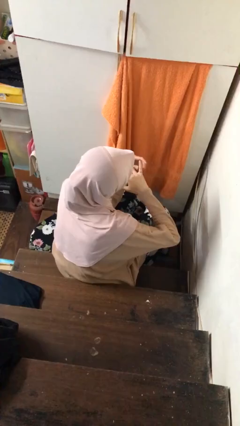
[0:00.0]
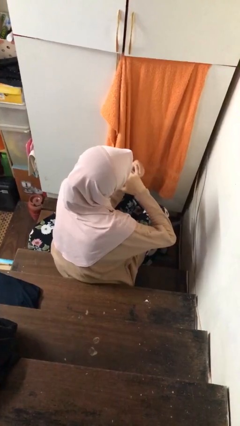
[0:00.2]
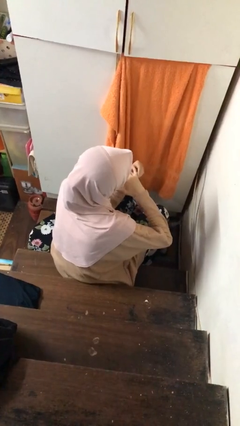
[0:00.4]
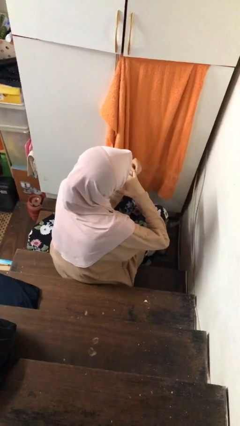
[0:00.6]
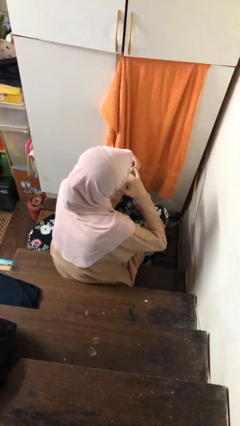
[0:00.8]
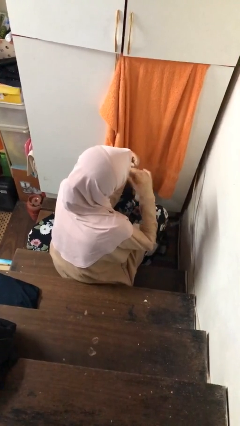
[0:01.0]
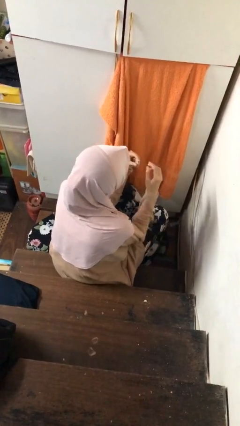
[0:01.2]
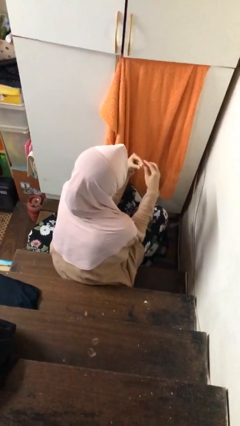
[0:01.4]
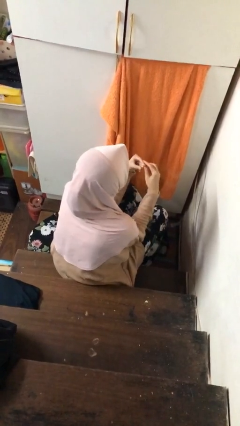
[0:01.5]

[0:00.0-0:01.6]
person takes off ring

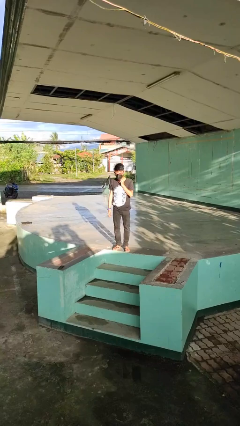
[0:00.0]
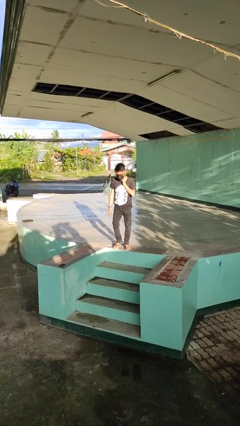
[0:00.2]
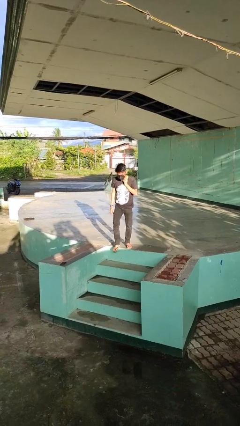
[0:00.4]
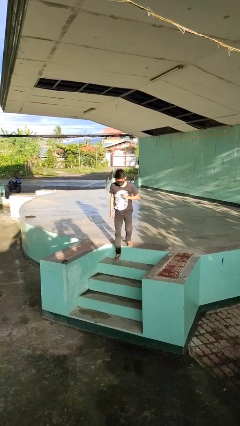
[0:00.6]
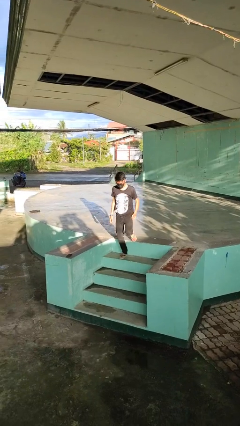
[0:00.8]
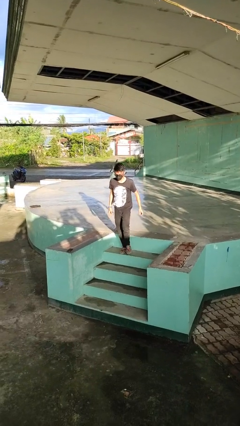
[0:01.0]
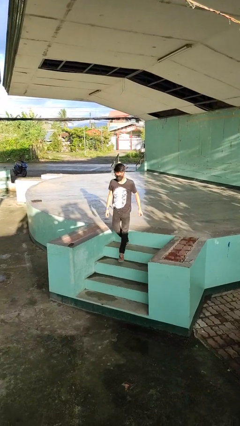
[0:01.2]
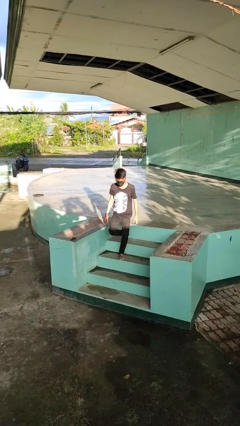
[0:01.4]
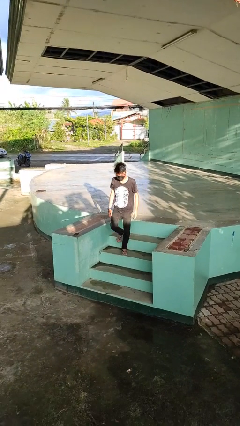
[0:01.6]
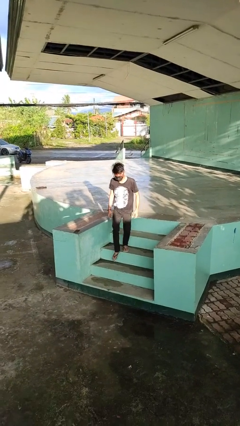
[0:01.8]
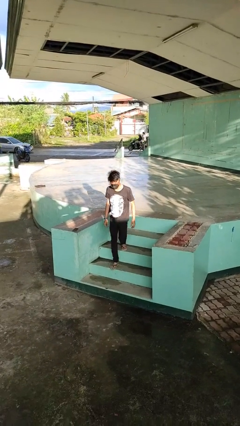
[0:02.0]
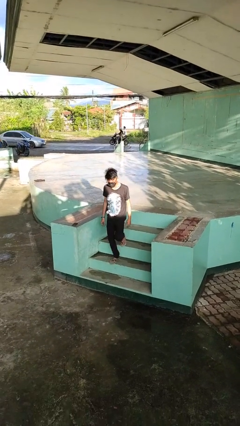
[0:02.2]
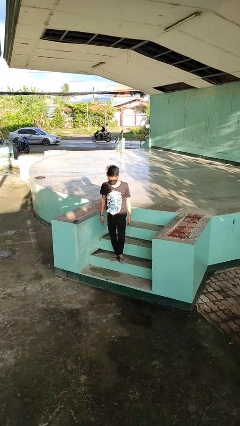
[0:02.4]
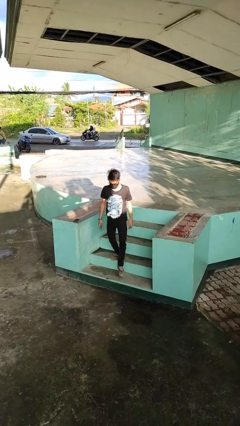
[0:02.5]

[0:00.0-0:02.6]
person climbs down stairs

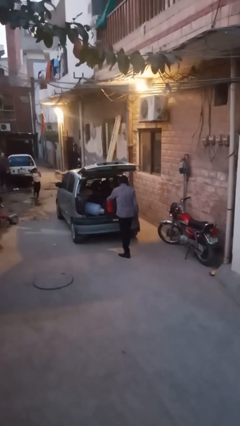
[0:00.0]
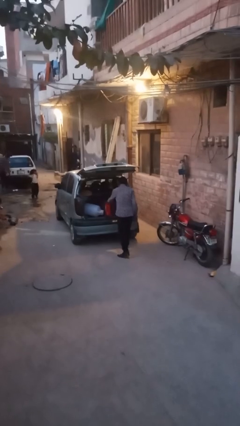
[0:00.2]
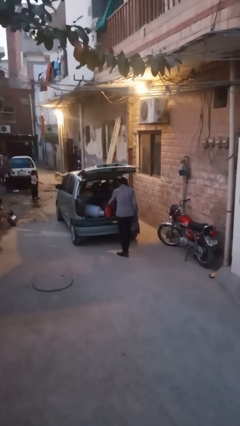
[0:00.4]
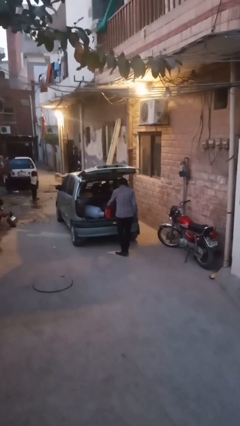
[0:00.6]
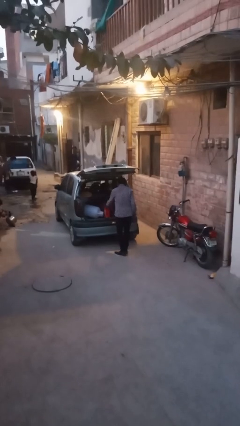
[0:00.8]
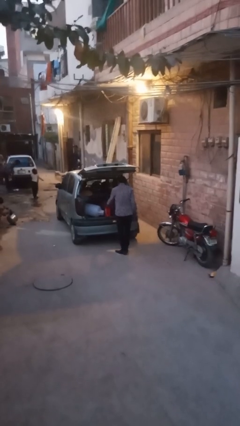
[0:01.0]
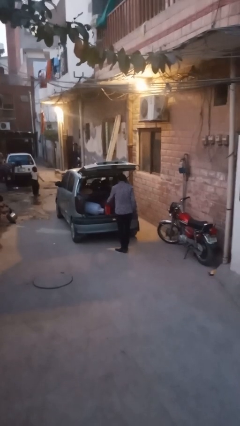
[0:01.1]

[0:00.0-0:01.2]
person loads car

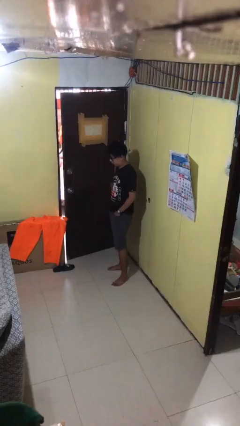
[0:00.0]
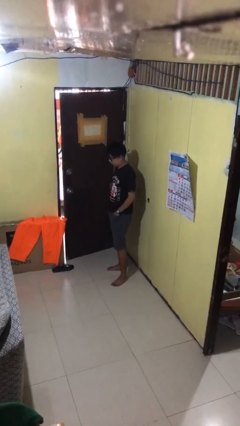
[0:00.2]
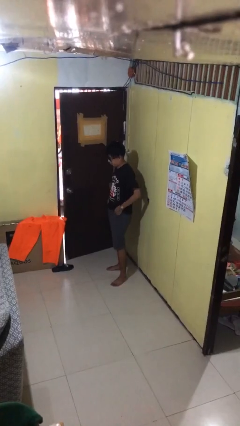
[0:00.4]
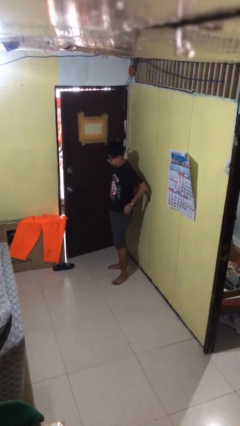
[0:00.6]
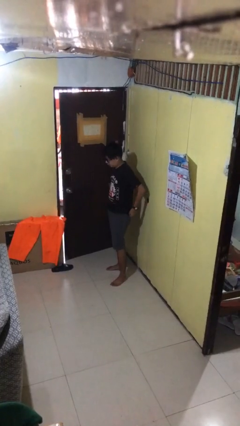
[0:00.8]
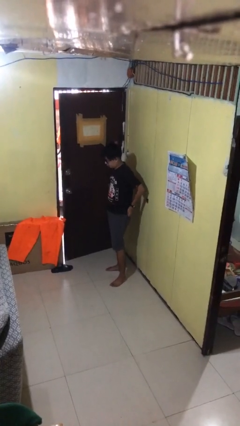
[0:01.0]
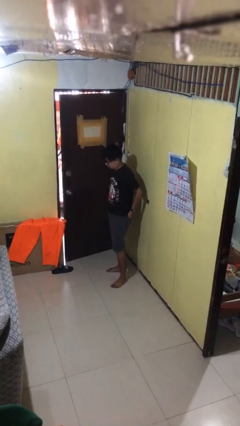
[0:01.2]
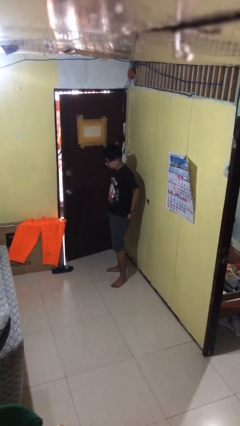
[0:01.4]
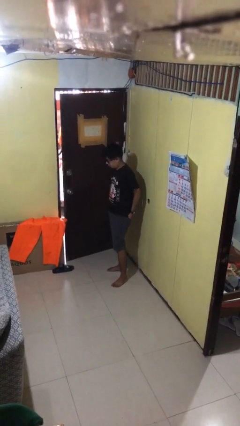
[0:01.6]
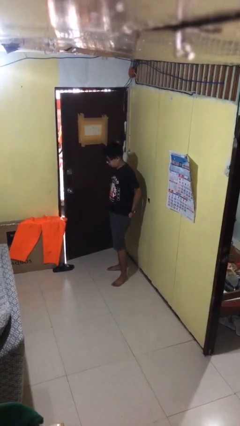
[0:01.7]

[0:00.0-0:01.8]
person puts hands in back pockets

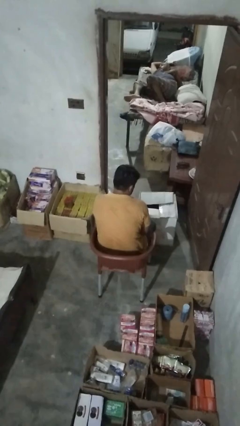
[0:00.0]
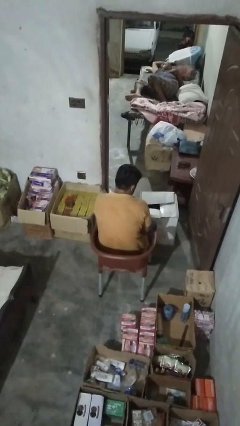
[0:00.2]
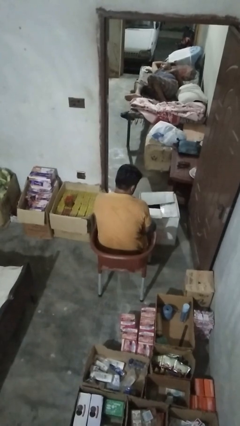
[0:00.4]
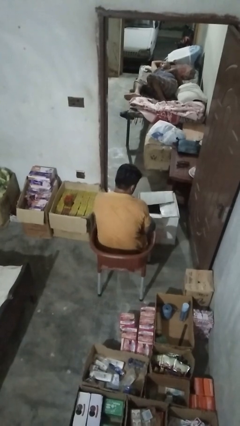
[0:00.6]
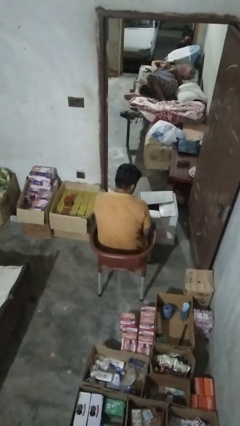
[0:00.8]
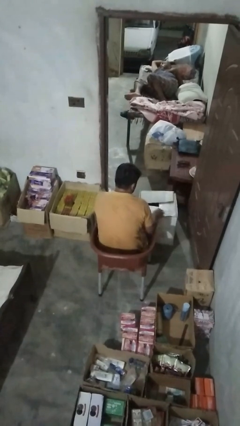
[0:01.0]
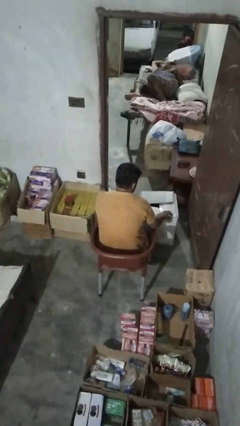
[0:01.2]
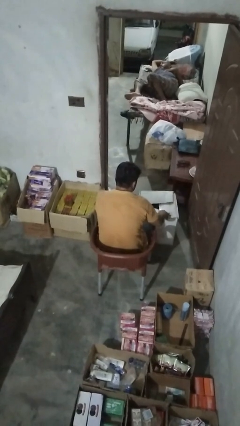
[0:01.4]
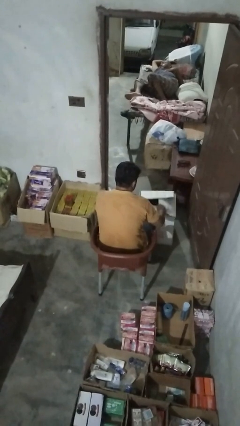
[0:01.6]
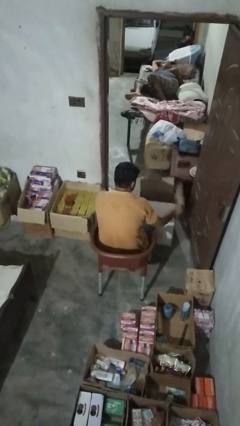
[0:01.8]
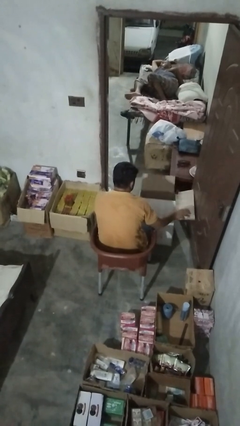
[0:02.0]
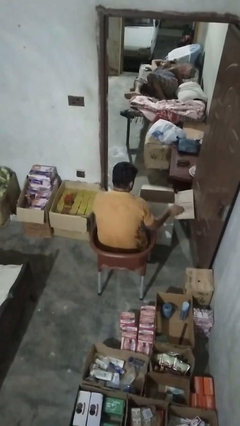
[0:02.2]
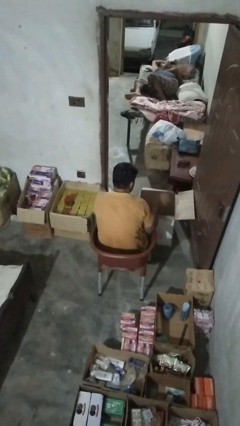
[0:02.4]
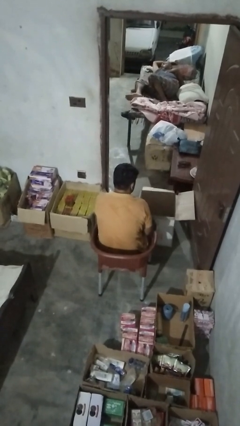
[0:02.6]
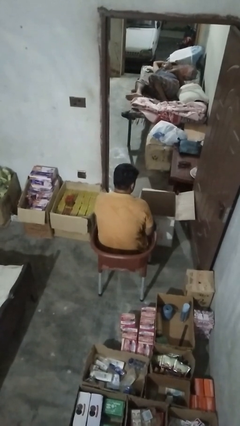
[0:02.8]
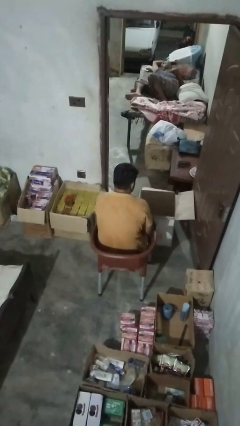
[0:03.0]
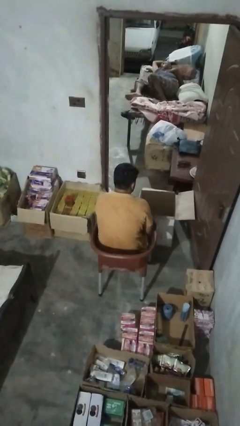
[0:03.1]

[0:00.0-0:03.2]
person closes box

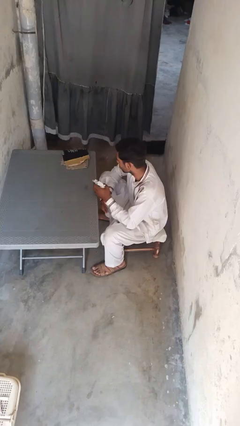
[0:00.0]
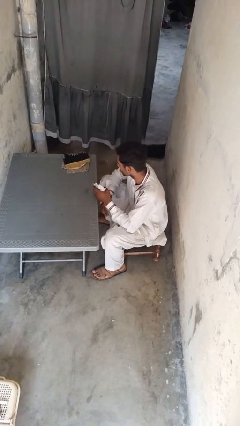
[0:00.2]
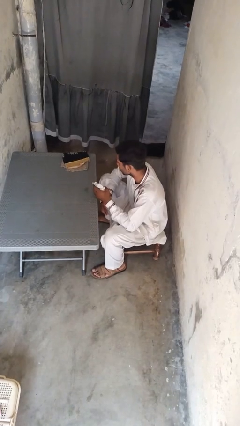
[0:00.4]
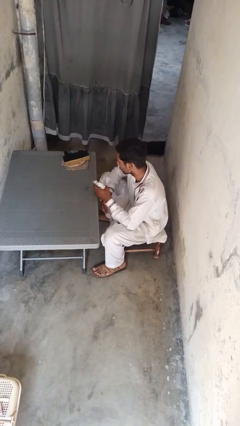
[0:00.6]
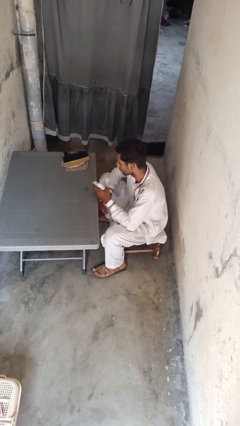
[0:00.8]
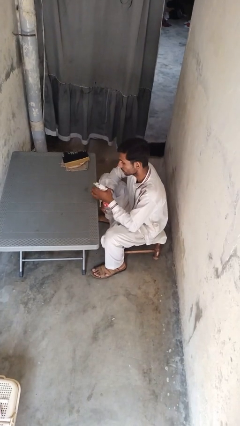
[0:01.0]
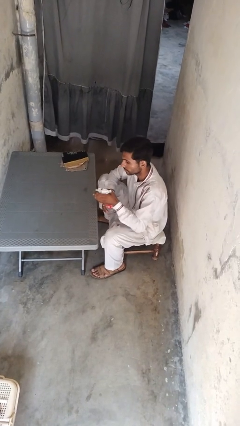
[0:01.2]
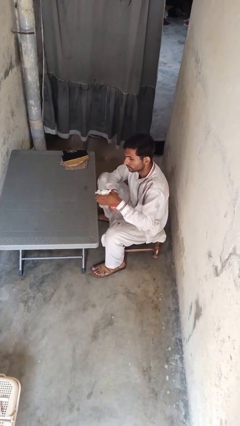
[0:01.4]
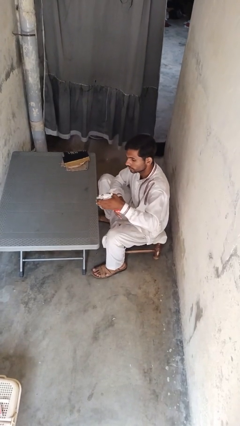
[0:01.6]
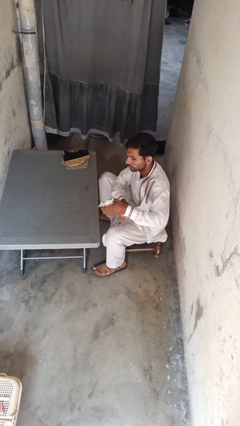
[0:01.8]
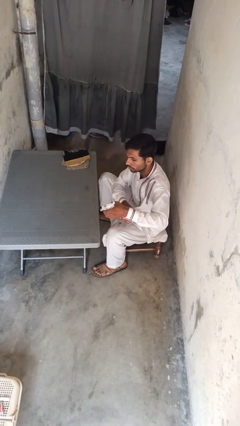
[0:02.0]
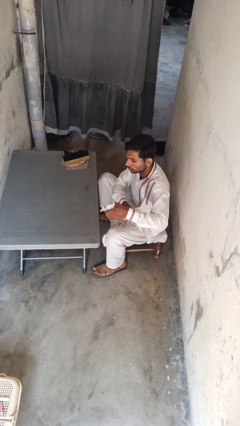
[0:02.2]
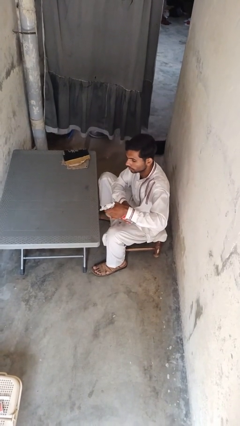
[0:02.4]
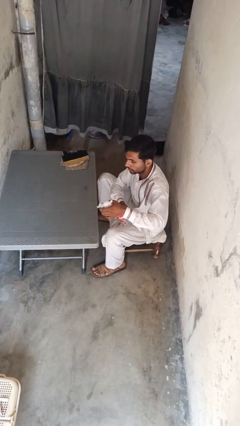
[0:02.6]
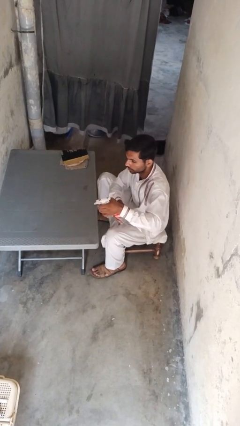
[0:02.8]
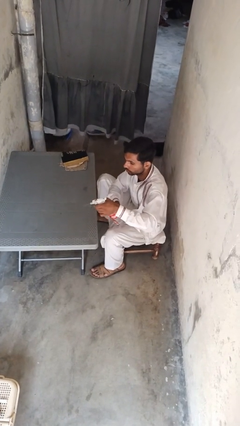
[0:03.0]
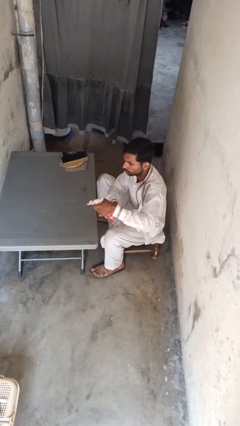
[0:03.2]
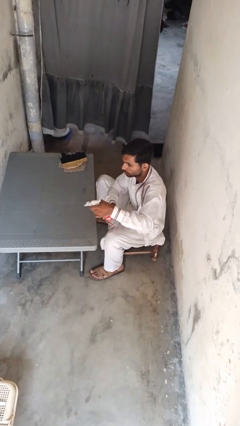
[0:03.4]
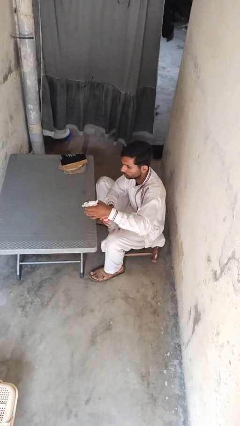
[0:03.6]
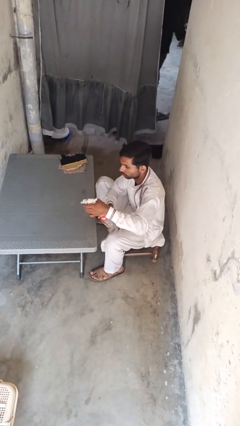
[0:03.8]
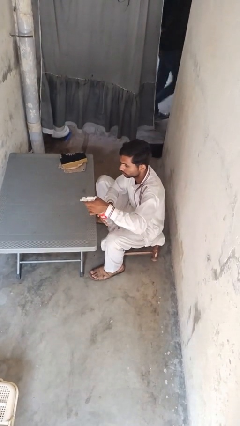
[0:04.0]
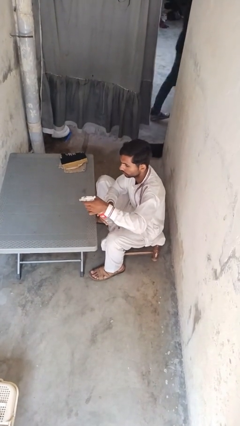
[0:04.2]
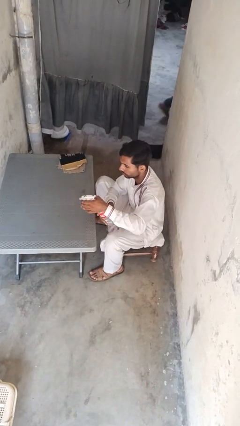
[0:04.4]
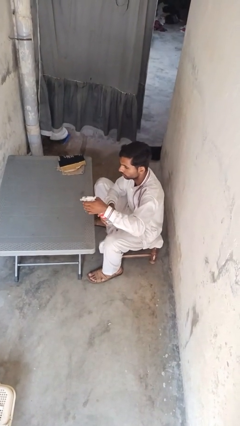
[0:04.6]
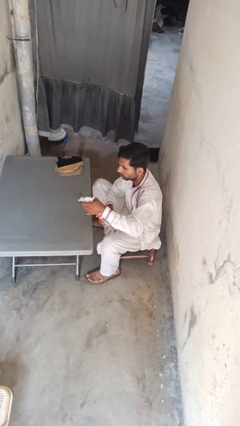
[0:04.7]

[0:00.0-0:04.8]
person sprays from bottle

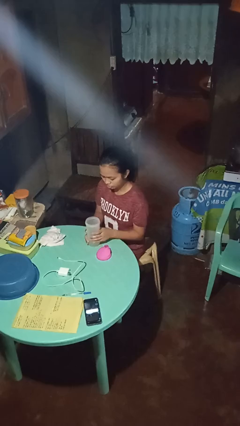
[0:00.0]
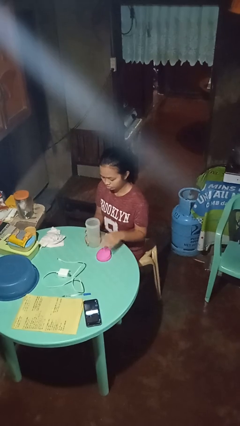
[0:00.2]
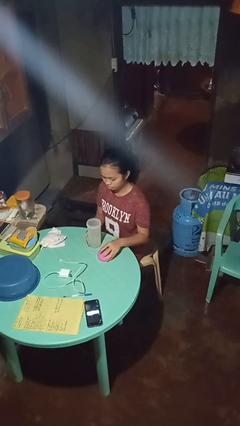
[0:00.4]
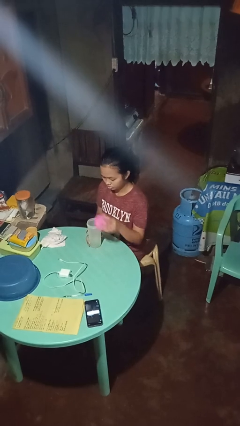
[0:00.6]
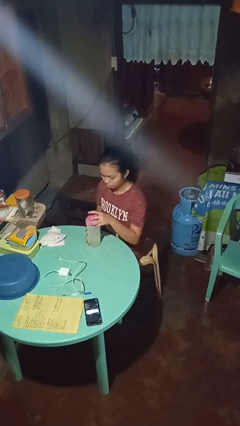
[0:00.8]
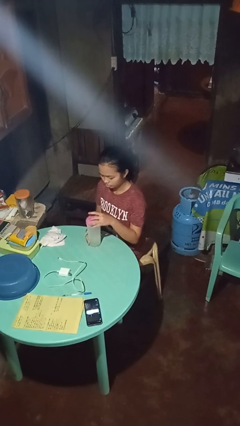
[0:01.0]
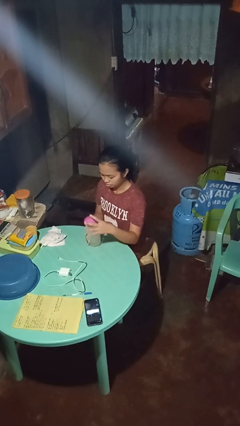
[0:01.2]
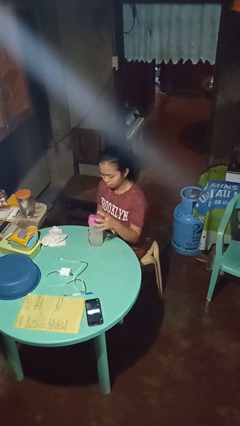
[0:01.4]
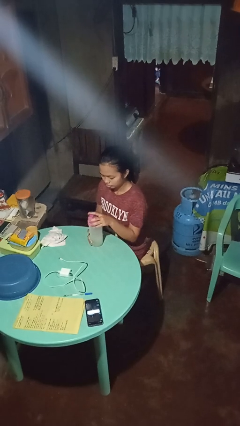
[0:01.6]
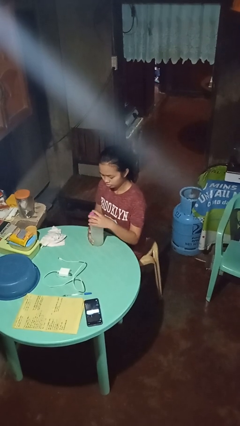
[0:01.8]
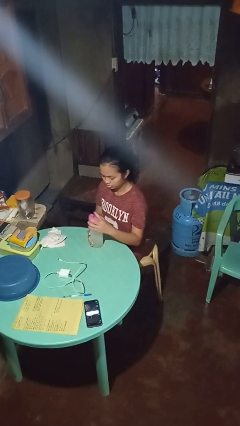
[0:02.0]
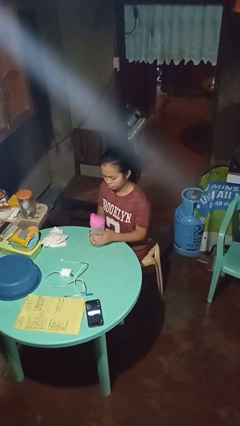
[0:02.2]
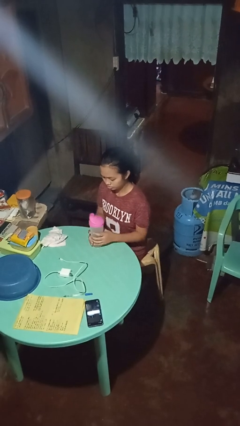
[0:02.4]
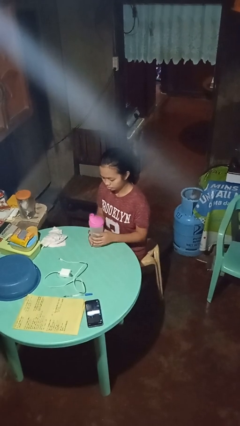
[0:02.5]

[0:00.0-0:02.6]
person screws lid to bottle
